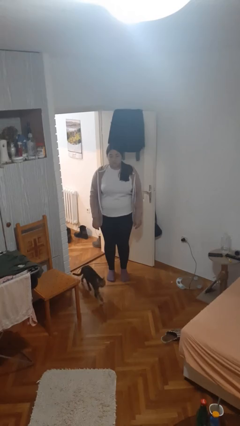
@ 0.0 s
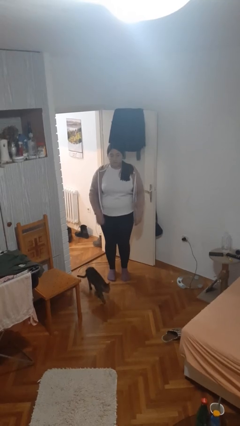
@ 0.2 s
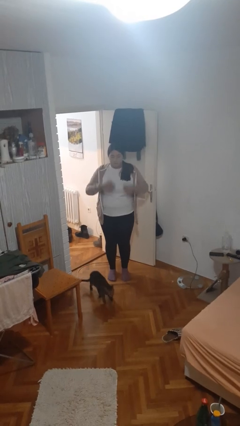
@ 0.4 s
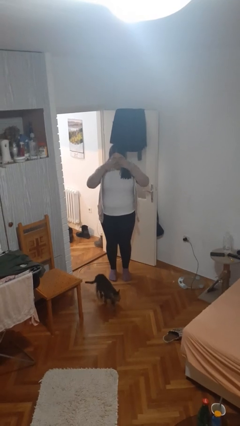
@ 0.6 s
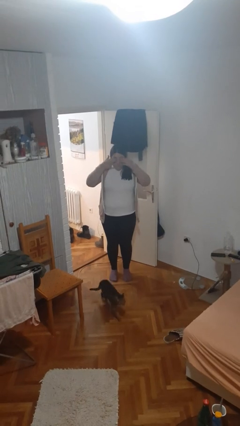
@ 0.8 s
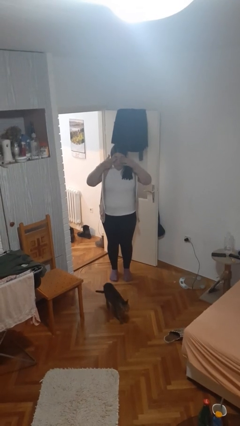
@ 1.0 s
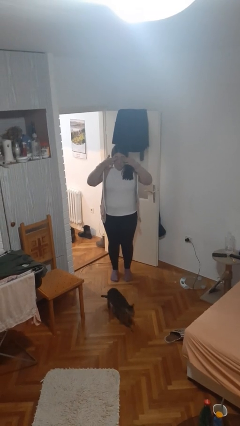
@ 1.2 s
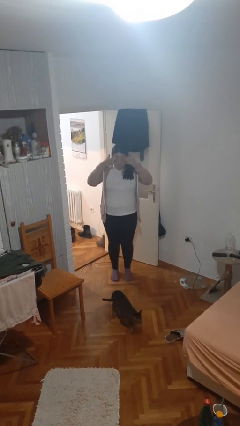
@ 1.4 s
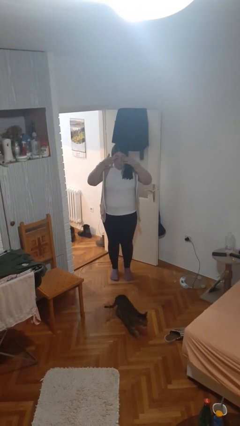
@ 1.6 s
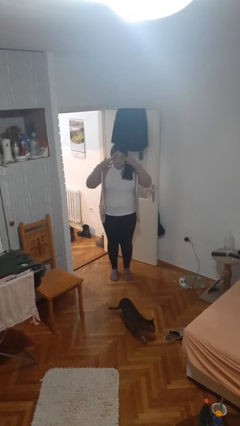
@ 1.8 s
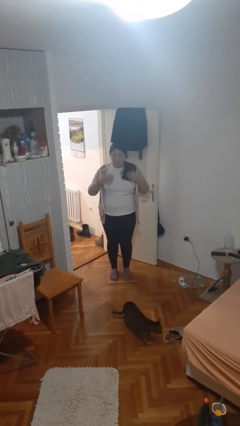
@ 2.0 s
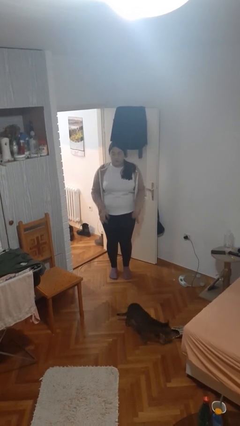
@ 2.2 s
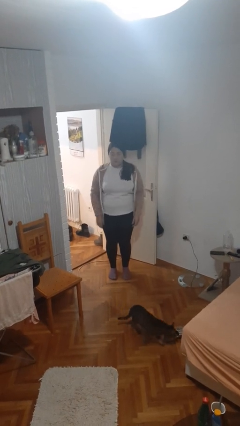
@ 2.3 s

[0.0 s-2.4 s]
person rubs eyes

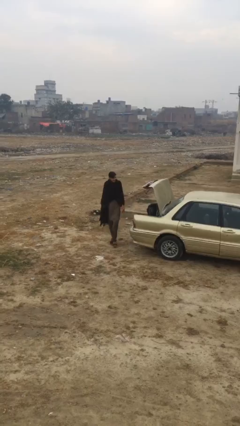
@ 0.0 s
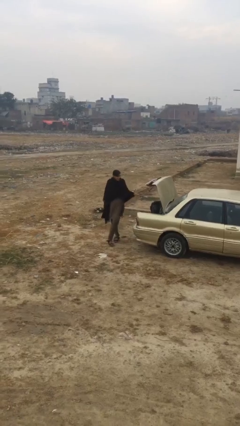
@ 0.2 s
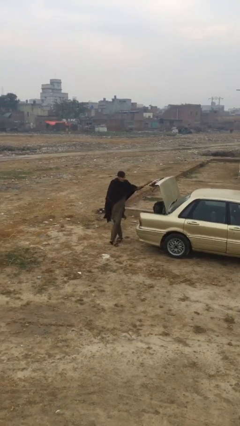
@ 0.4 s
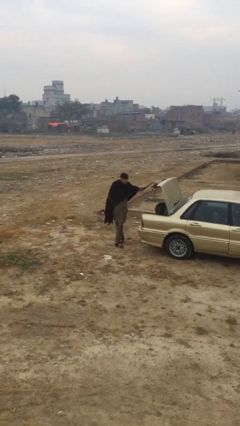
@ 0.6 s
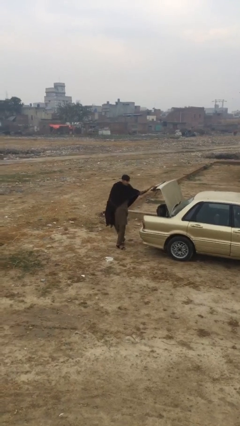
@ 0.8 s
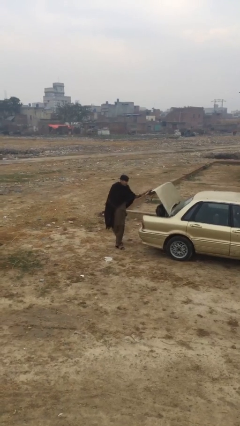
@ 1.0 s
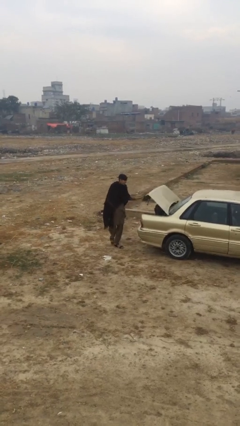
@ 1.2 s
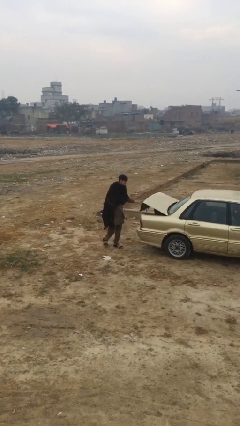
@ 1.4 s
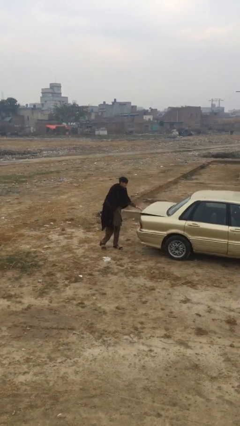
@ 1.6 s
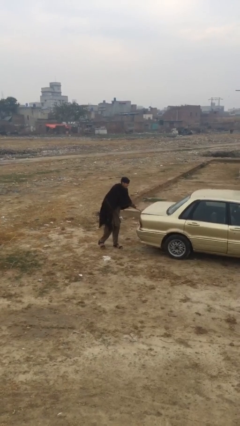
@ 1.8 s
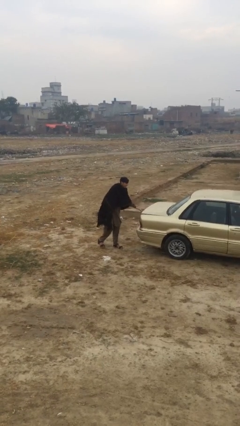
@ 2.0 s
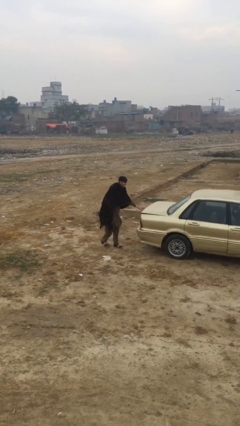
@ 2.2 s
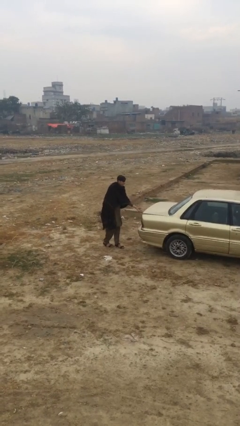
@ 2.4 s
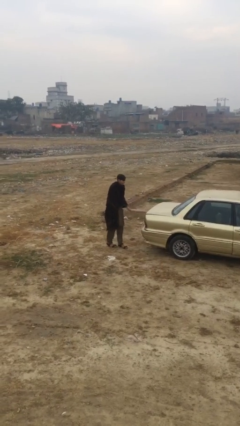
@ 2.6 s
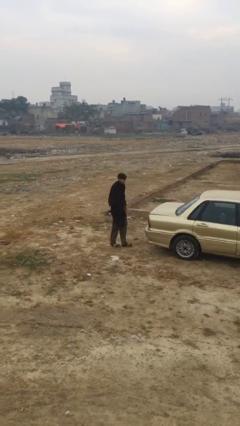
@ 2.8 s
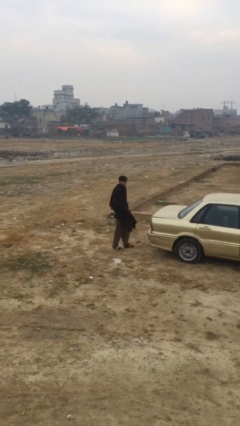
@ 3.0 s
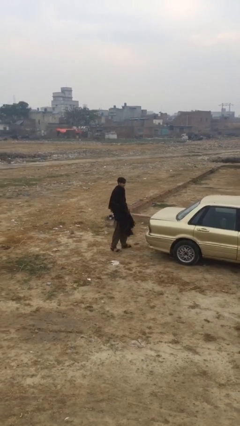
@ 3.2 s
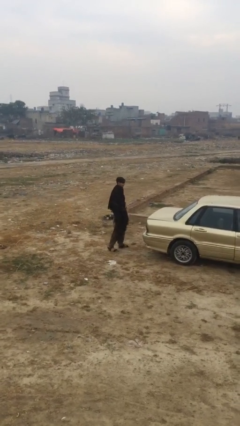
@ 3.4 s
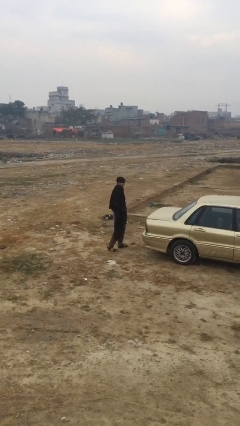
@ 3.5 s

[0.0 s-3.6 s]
person closes car trunk

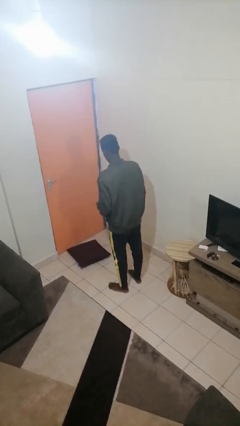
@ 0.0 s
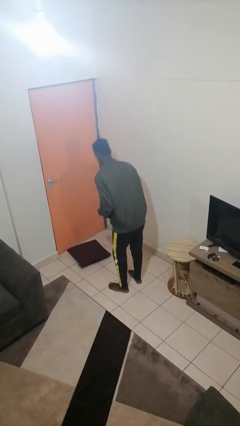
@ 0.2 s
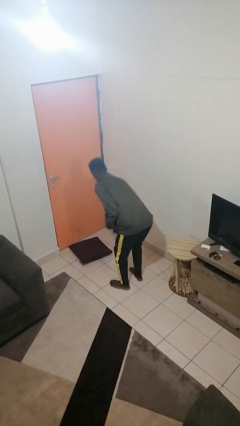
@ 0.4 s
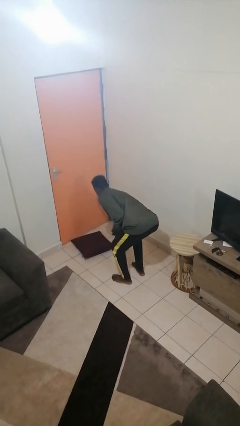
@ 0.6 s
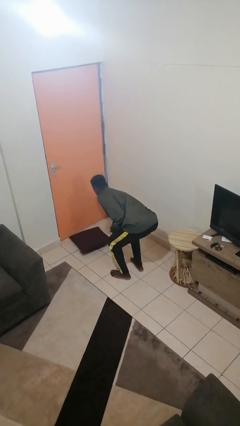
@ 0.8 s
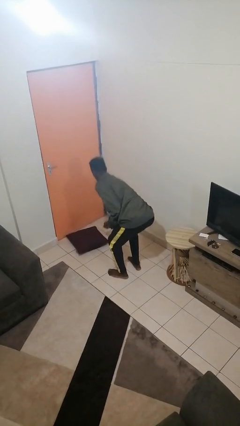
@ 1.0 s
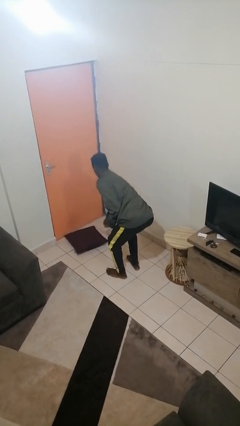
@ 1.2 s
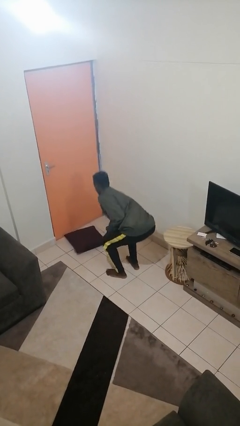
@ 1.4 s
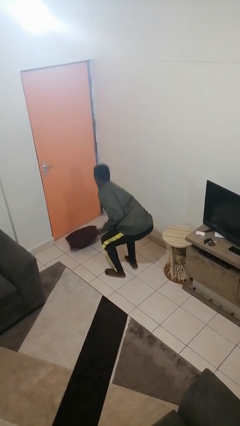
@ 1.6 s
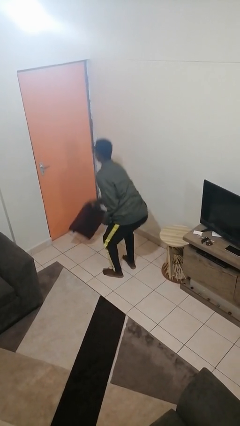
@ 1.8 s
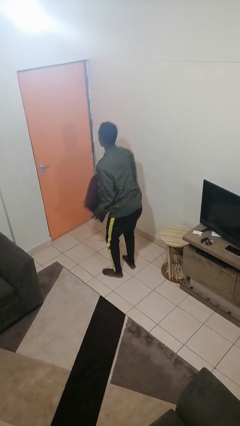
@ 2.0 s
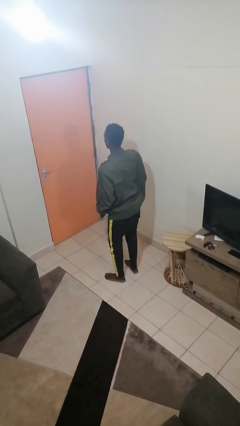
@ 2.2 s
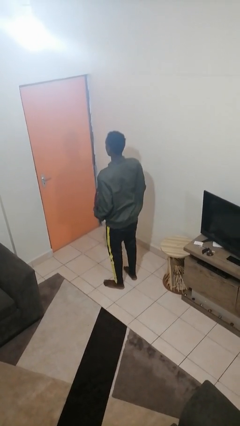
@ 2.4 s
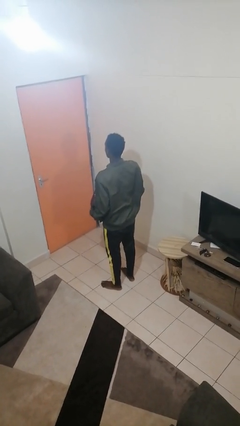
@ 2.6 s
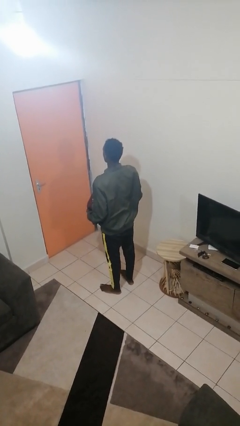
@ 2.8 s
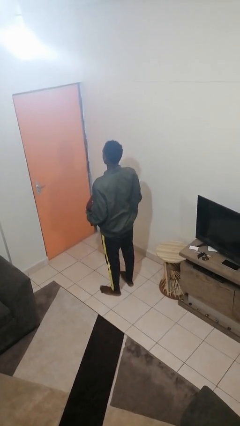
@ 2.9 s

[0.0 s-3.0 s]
person picks up object from floor

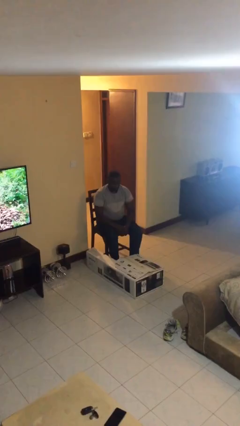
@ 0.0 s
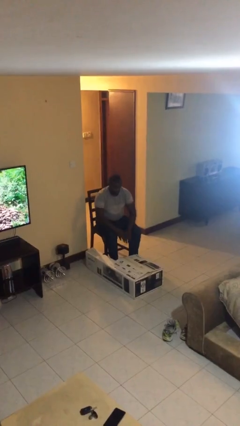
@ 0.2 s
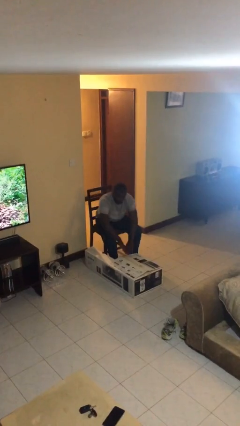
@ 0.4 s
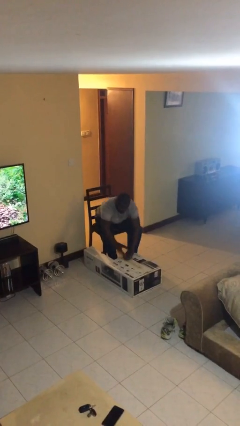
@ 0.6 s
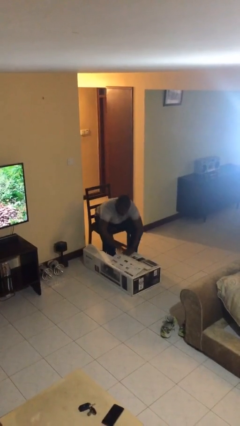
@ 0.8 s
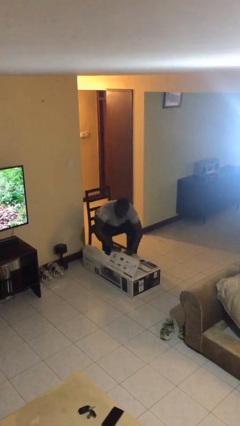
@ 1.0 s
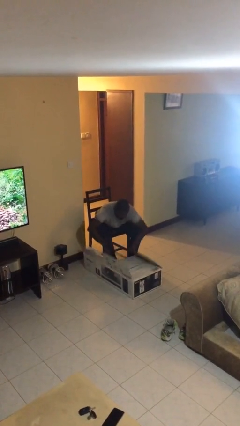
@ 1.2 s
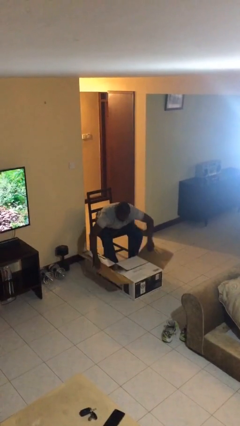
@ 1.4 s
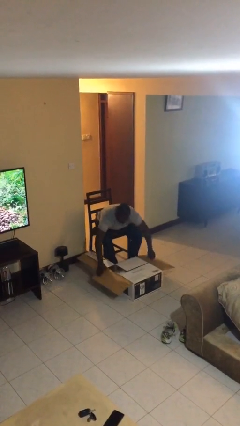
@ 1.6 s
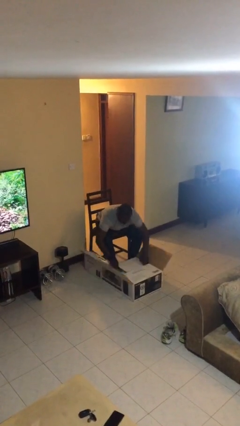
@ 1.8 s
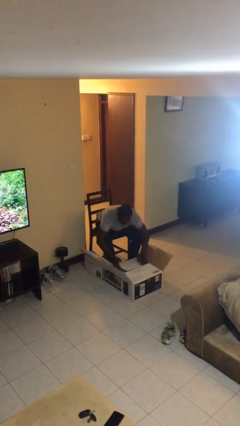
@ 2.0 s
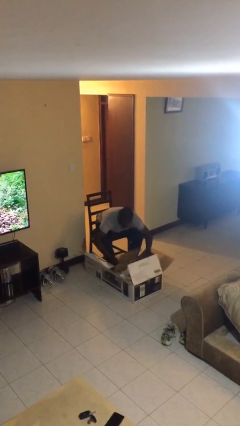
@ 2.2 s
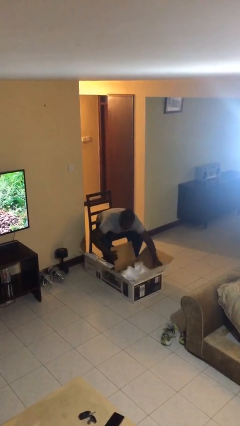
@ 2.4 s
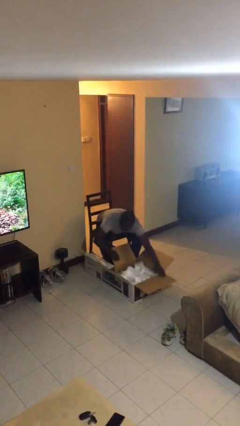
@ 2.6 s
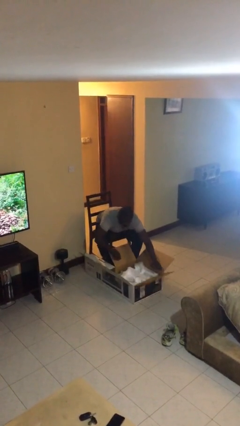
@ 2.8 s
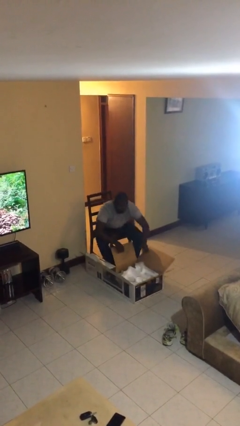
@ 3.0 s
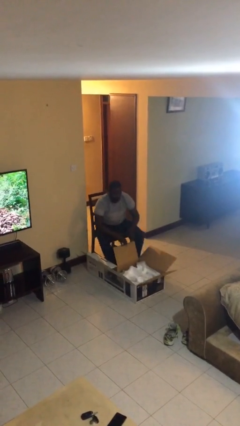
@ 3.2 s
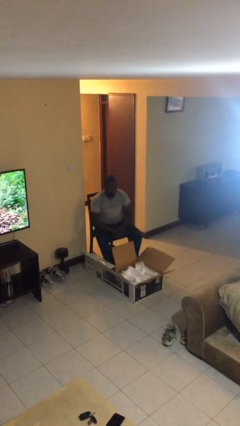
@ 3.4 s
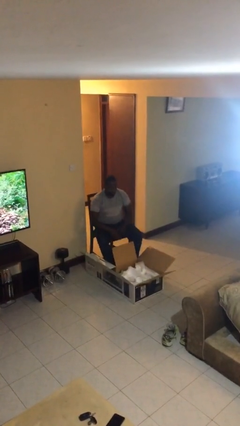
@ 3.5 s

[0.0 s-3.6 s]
person opens box

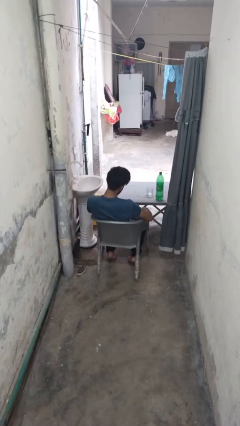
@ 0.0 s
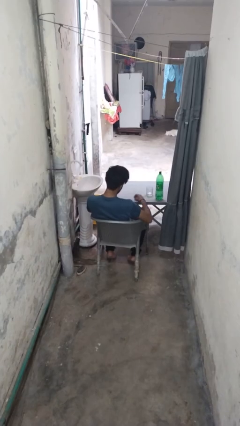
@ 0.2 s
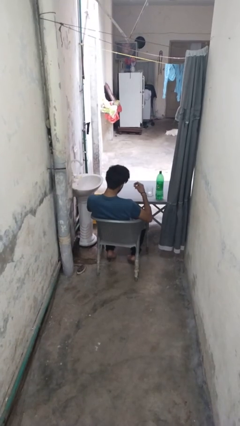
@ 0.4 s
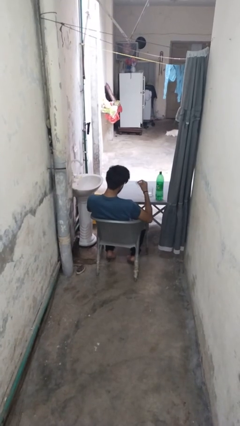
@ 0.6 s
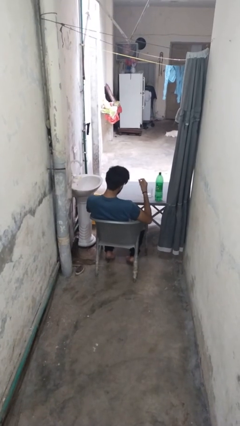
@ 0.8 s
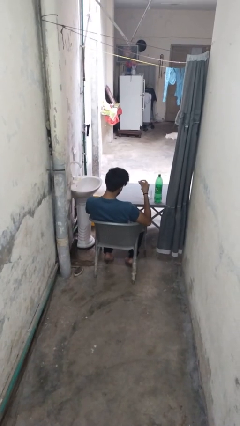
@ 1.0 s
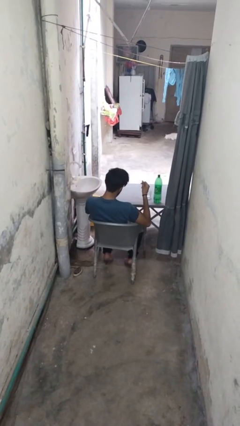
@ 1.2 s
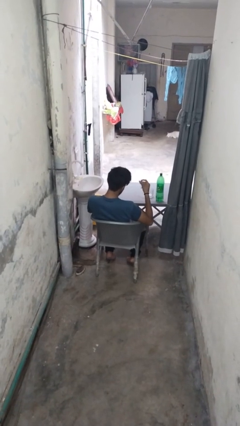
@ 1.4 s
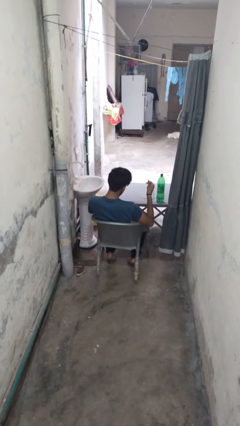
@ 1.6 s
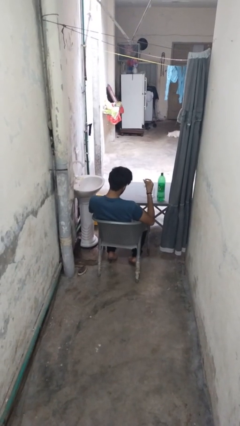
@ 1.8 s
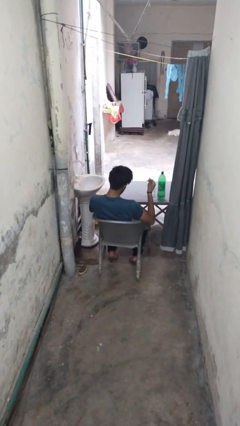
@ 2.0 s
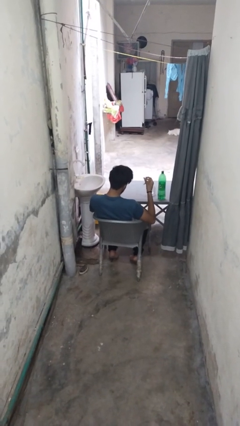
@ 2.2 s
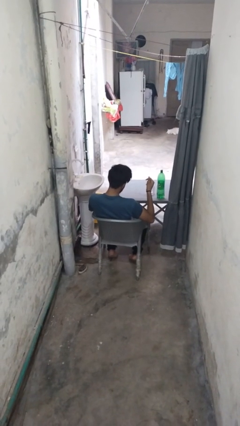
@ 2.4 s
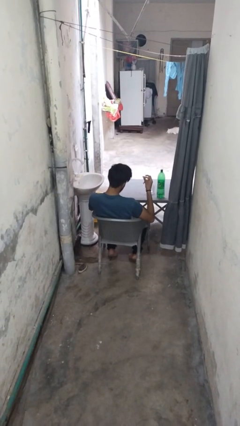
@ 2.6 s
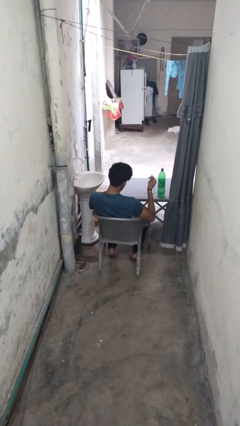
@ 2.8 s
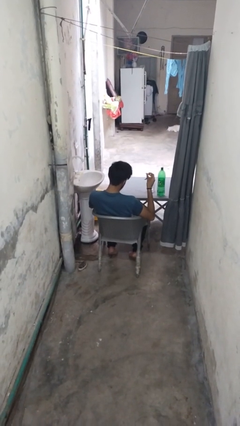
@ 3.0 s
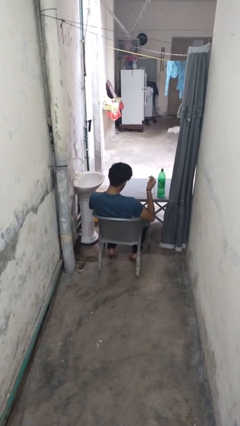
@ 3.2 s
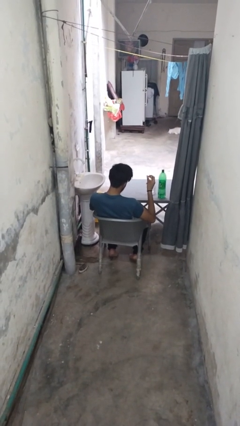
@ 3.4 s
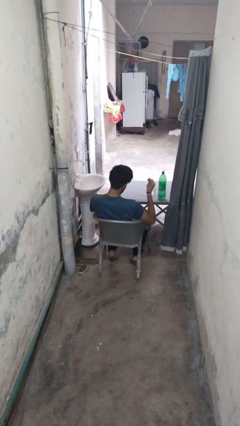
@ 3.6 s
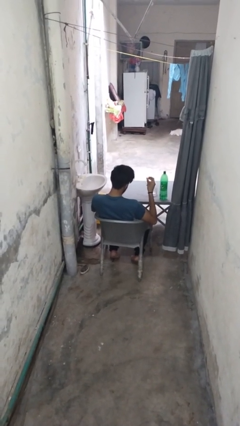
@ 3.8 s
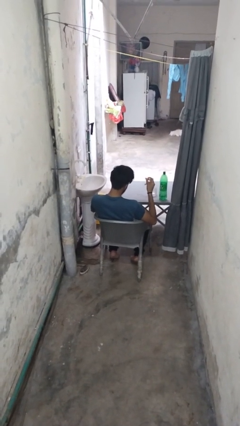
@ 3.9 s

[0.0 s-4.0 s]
person snaps fingers

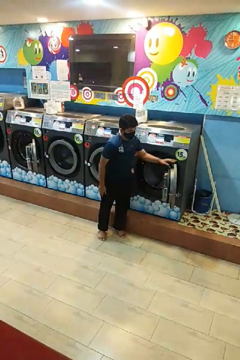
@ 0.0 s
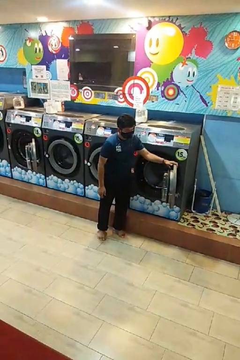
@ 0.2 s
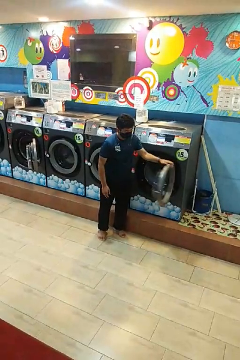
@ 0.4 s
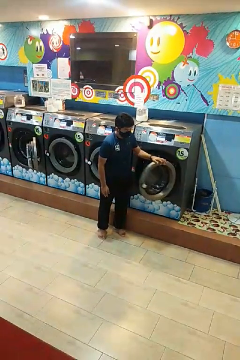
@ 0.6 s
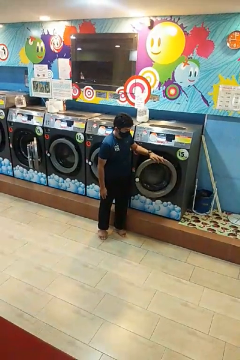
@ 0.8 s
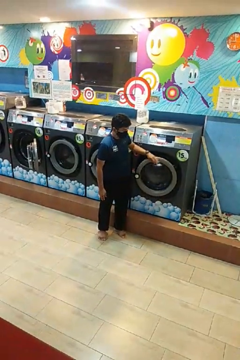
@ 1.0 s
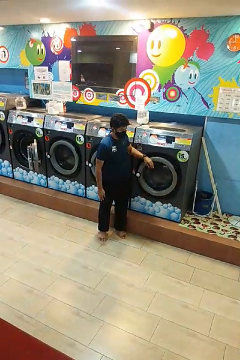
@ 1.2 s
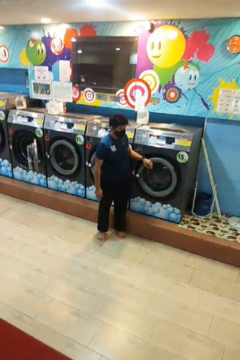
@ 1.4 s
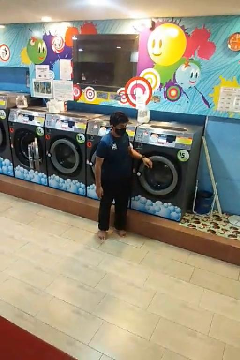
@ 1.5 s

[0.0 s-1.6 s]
person closes clothes washer
